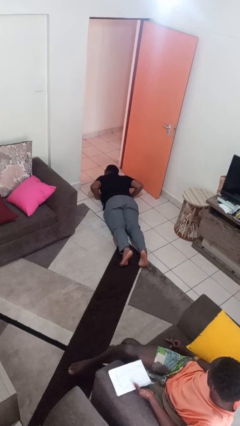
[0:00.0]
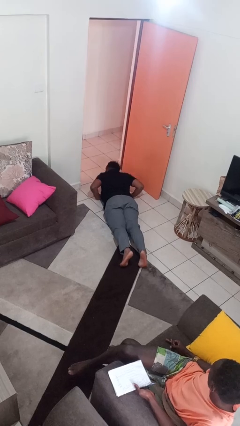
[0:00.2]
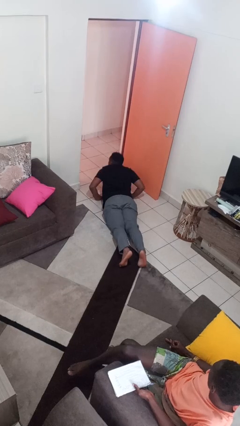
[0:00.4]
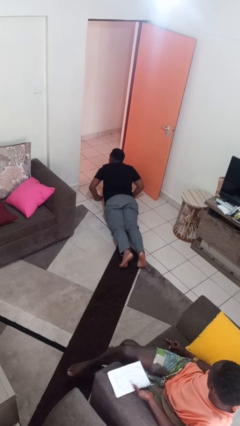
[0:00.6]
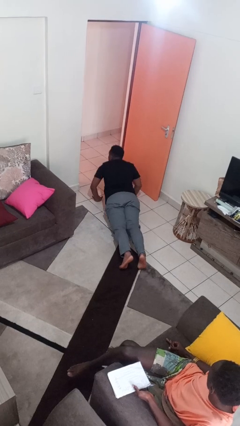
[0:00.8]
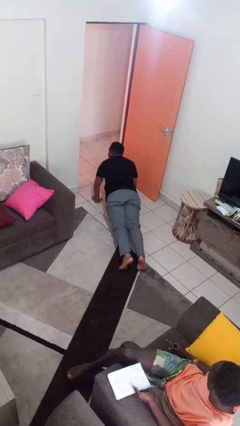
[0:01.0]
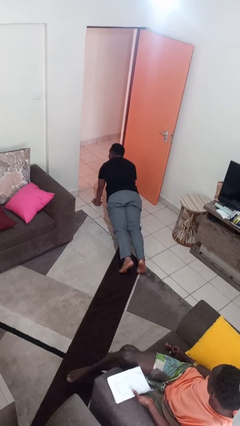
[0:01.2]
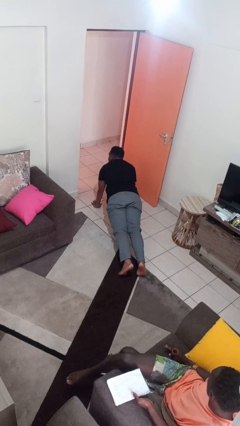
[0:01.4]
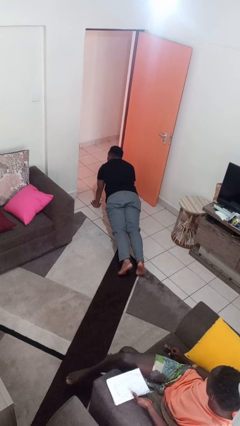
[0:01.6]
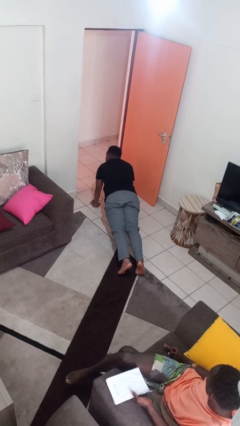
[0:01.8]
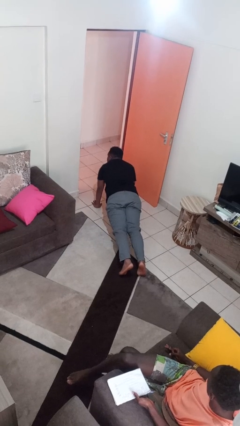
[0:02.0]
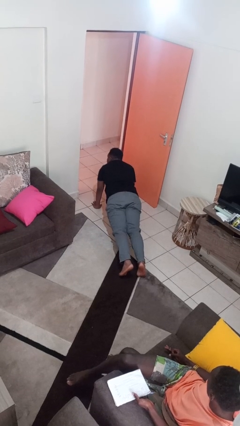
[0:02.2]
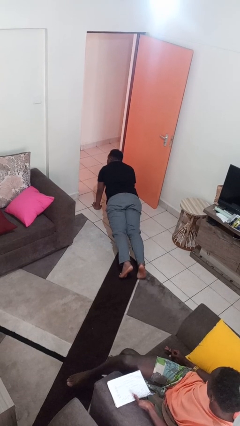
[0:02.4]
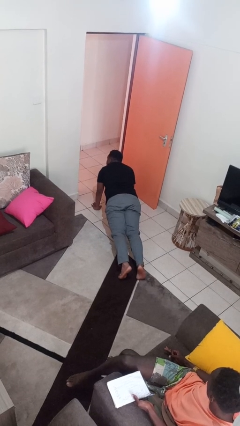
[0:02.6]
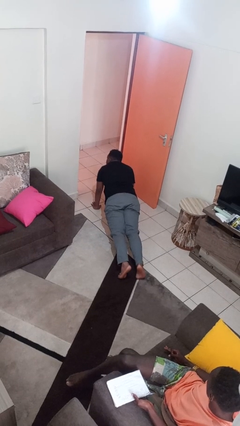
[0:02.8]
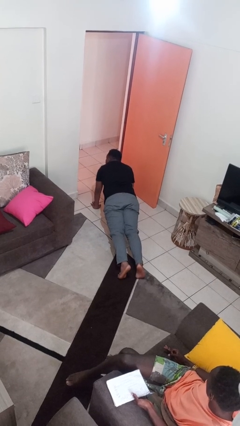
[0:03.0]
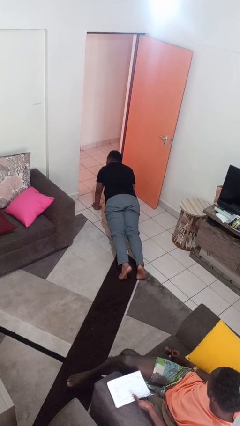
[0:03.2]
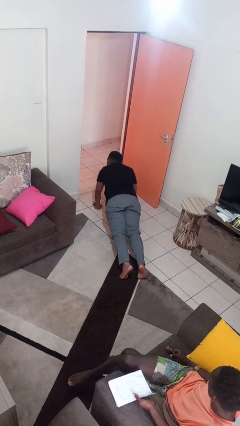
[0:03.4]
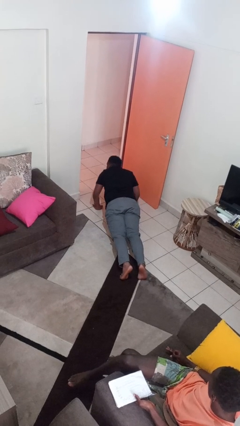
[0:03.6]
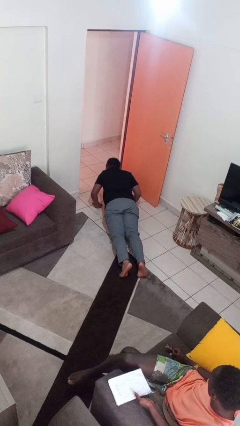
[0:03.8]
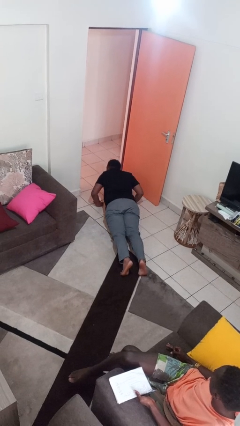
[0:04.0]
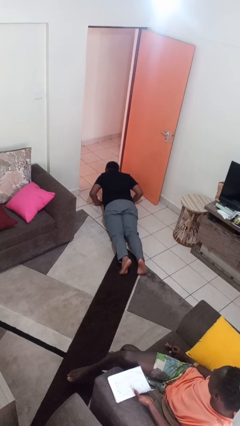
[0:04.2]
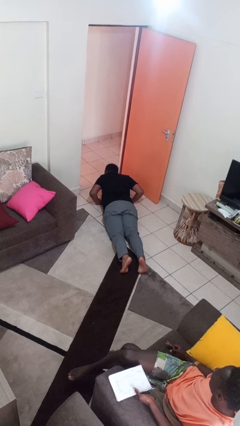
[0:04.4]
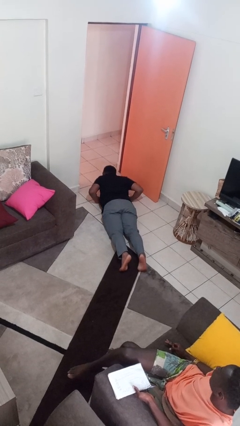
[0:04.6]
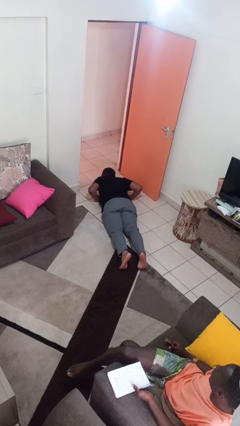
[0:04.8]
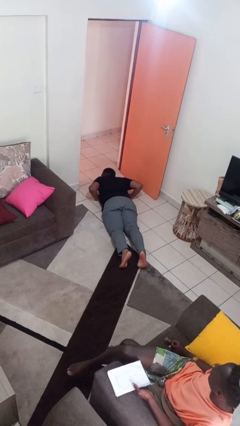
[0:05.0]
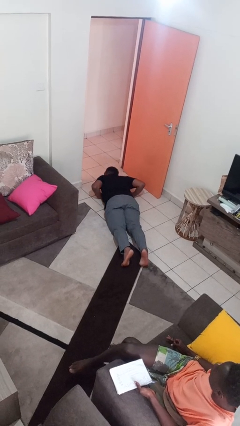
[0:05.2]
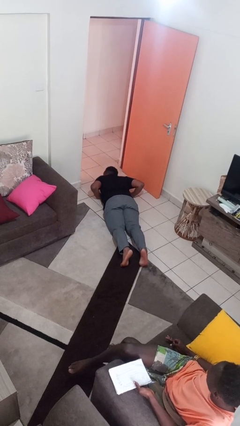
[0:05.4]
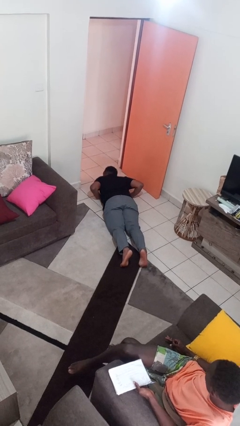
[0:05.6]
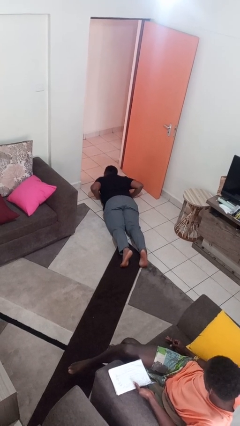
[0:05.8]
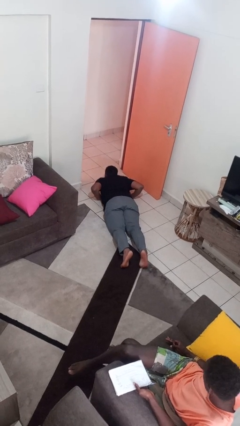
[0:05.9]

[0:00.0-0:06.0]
person exercises with pushup

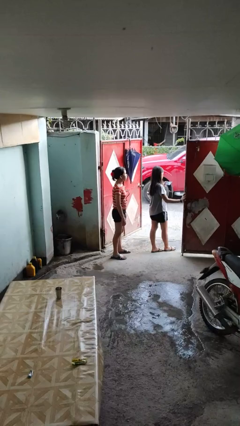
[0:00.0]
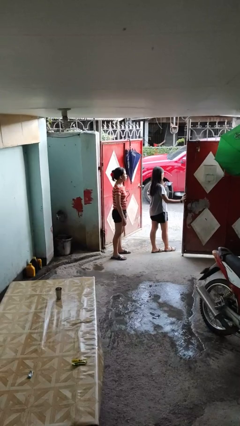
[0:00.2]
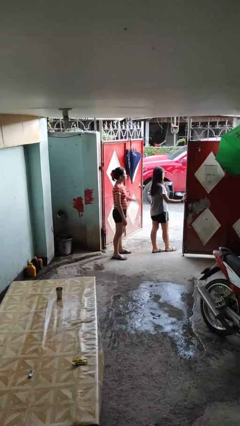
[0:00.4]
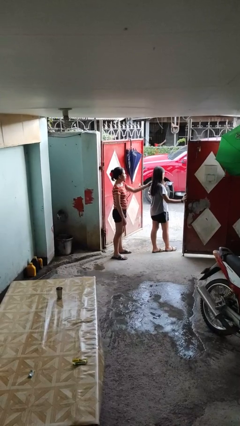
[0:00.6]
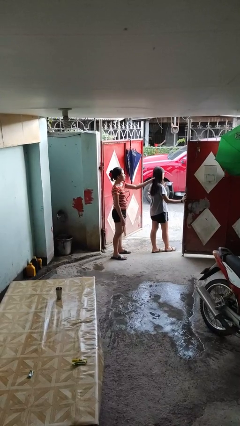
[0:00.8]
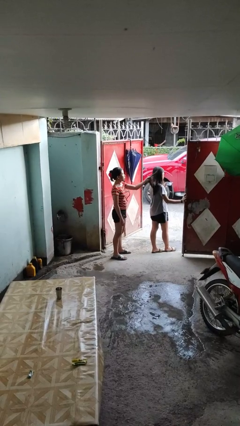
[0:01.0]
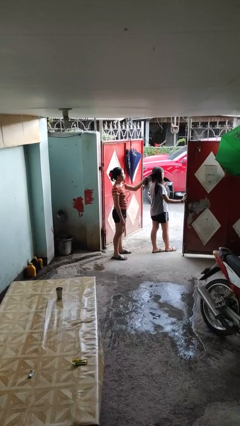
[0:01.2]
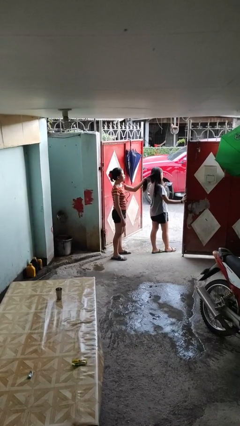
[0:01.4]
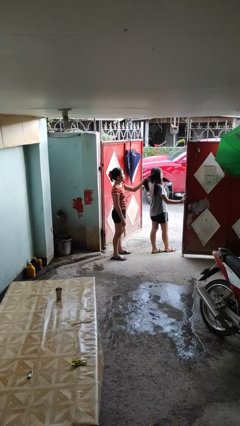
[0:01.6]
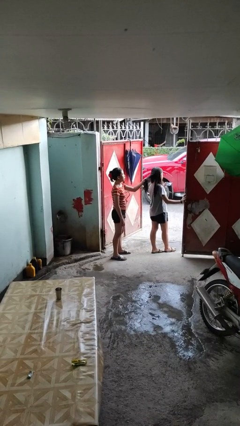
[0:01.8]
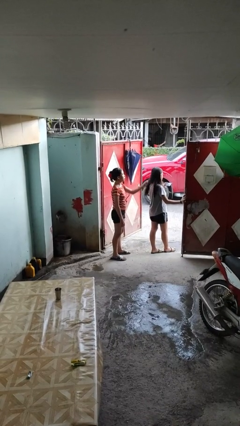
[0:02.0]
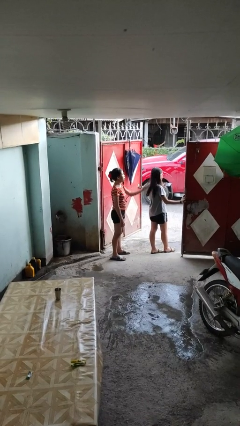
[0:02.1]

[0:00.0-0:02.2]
person grabs person by hair

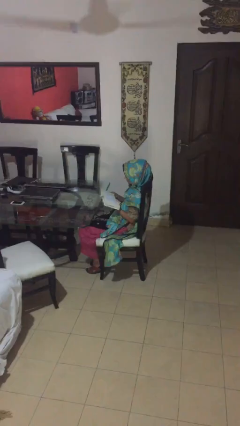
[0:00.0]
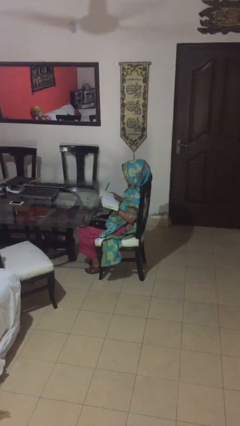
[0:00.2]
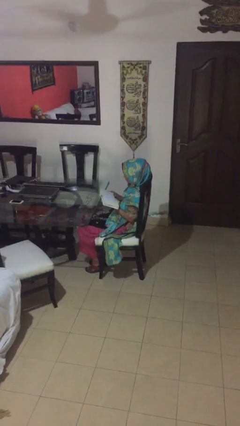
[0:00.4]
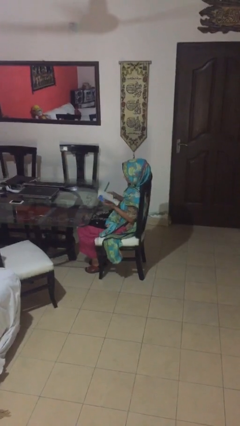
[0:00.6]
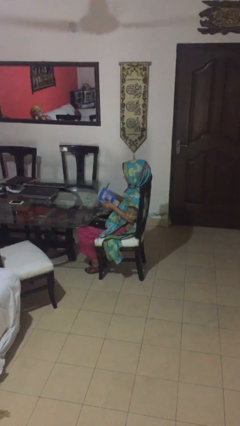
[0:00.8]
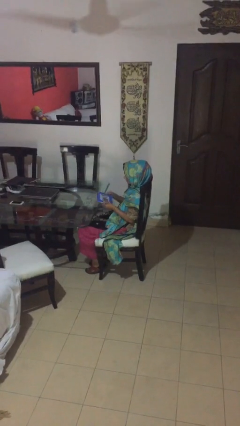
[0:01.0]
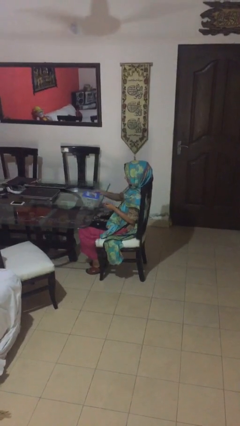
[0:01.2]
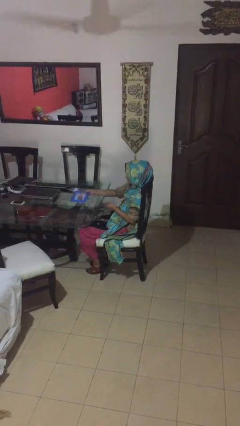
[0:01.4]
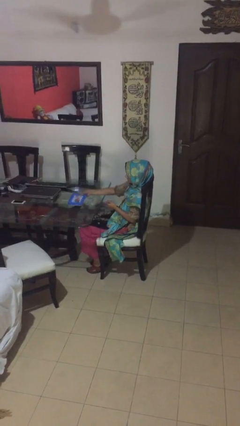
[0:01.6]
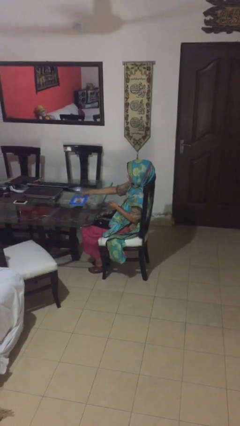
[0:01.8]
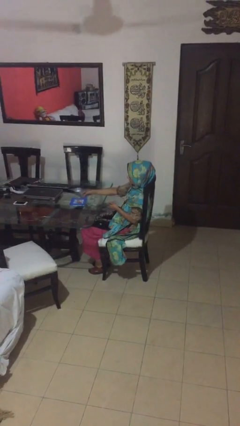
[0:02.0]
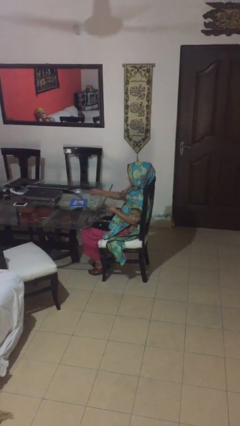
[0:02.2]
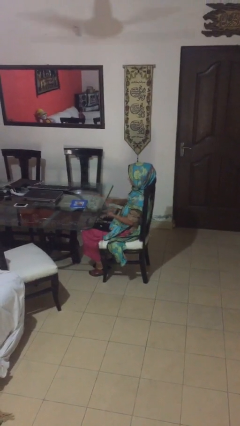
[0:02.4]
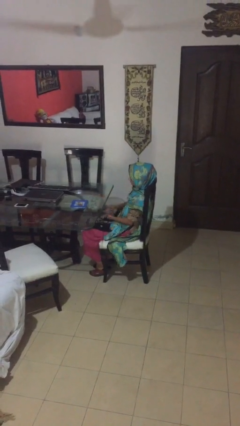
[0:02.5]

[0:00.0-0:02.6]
person puts down object on table

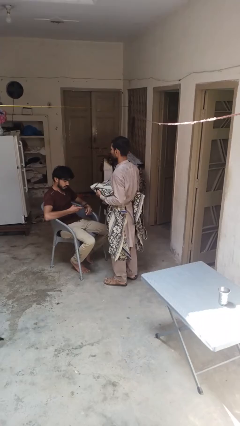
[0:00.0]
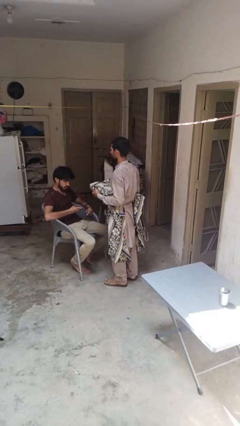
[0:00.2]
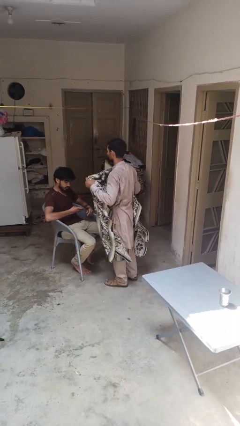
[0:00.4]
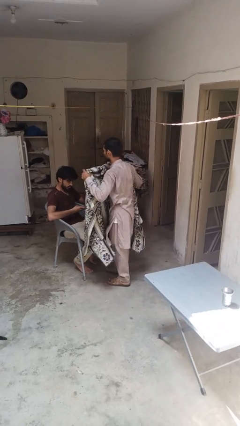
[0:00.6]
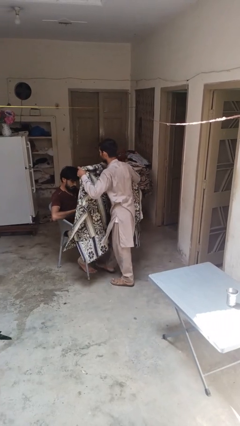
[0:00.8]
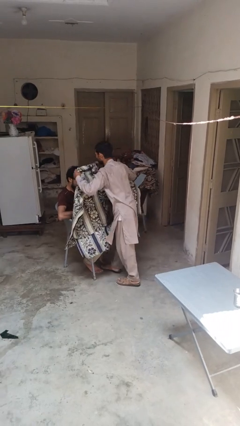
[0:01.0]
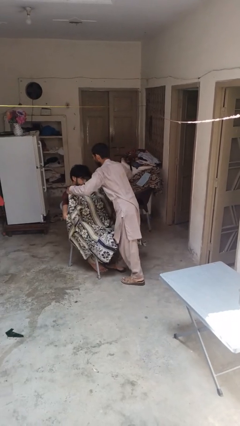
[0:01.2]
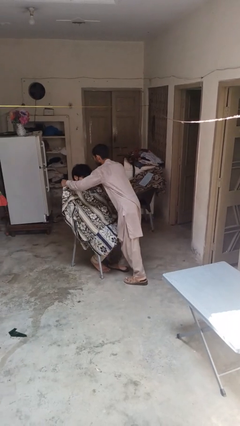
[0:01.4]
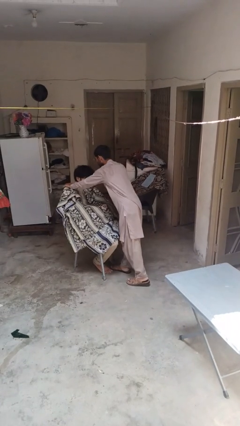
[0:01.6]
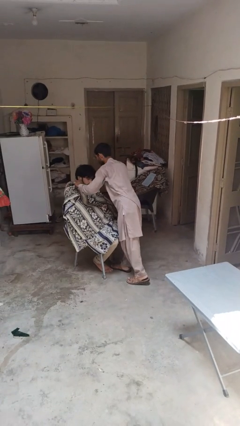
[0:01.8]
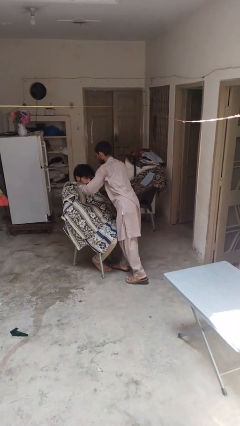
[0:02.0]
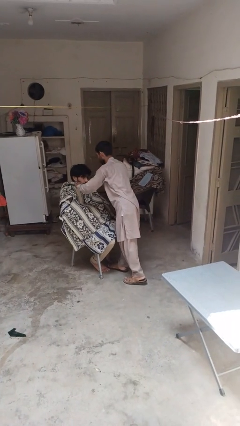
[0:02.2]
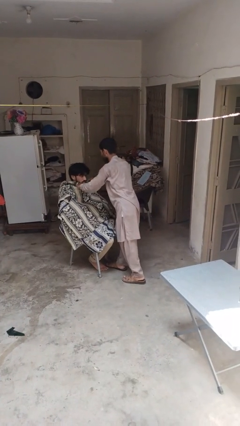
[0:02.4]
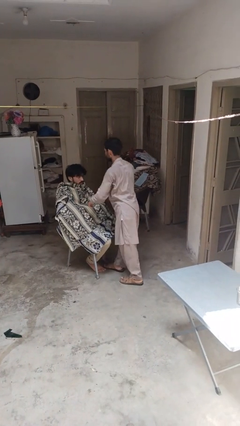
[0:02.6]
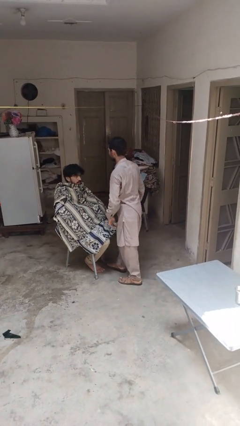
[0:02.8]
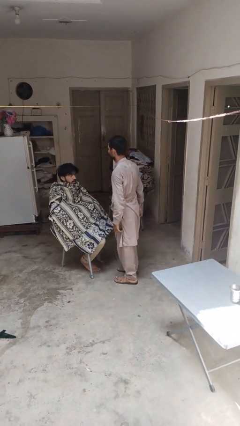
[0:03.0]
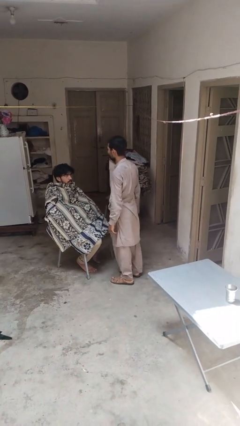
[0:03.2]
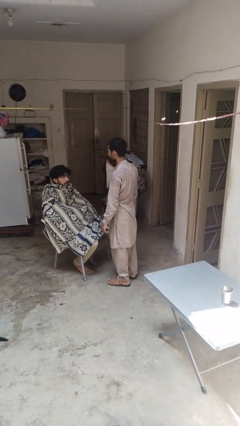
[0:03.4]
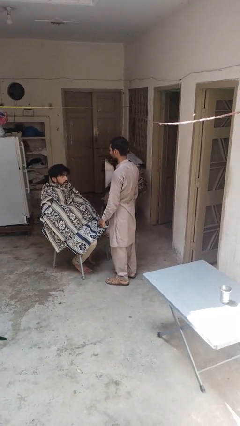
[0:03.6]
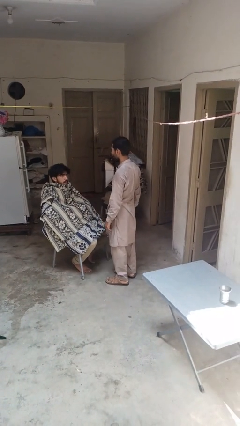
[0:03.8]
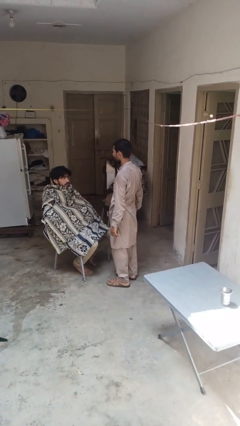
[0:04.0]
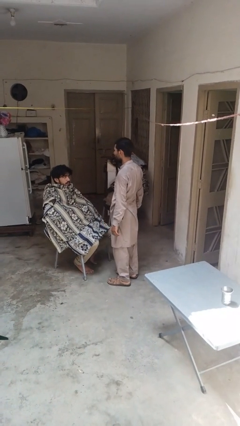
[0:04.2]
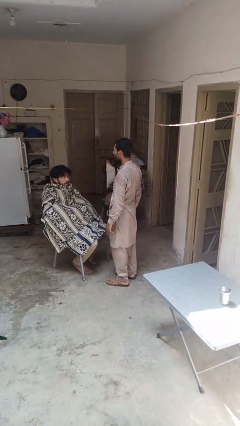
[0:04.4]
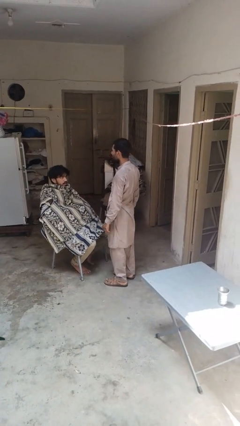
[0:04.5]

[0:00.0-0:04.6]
person covers friend with blanket

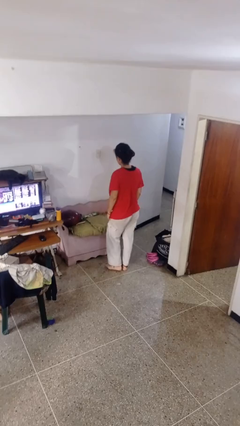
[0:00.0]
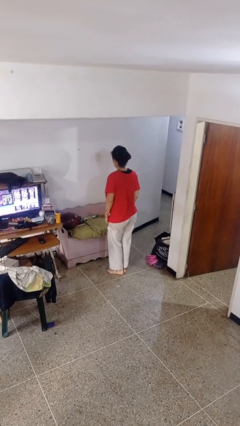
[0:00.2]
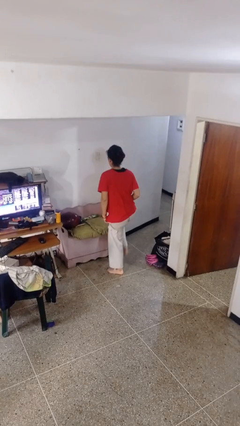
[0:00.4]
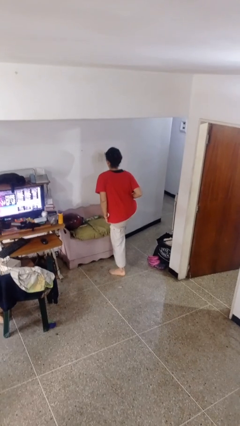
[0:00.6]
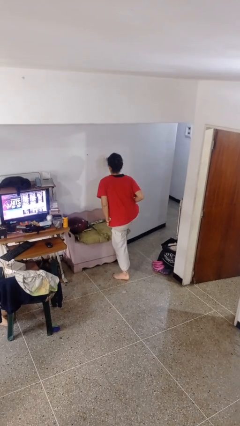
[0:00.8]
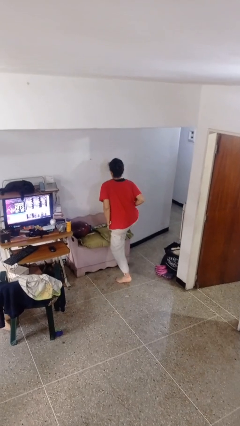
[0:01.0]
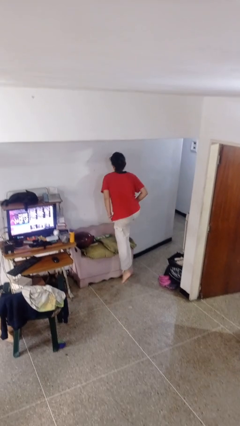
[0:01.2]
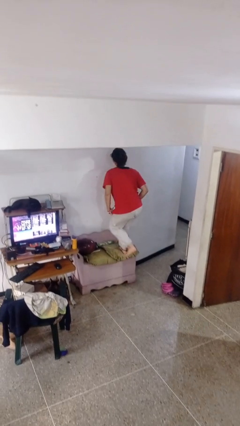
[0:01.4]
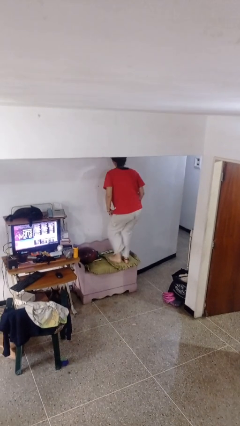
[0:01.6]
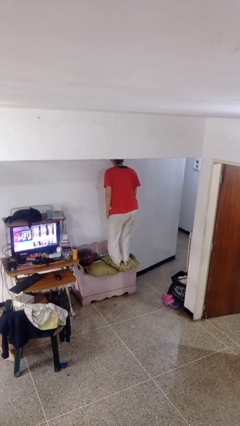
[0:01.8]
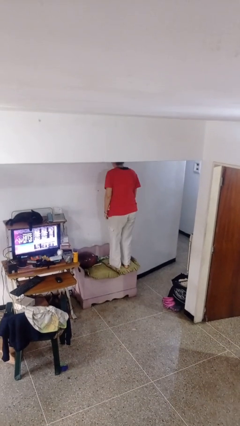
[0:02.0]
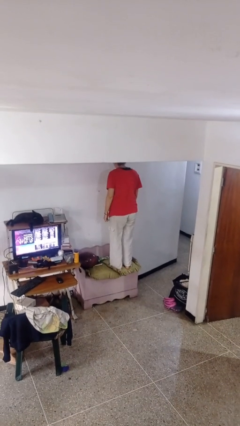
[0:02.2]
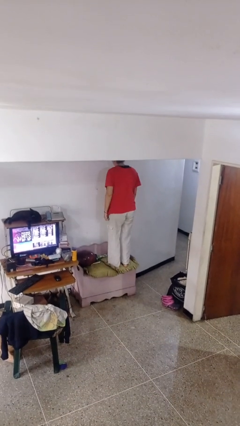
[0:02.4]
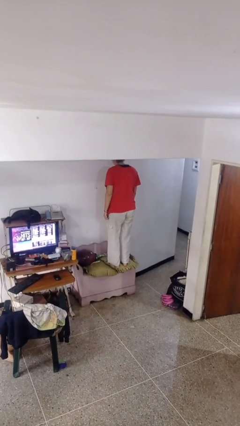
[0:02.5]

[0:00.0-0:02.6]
person climbs on couch
